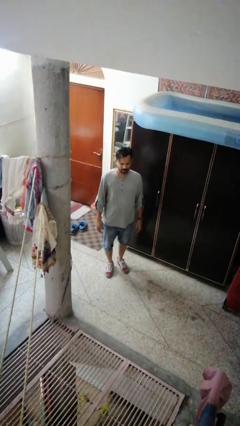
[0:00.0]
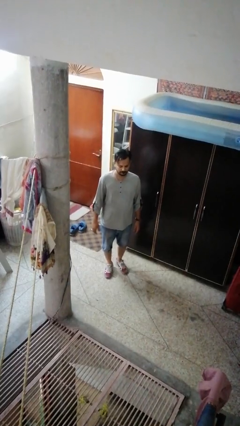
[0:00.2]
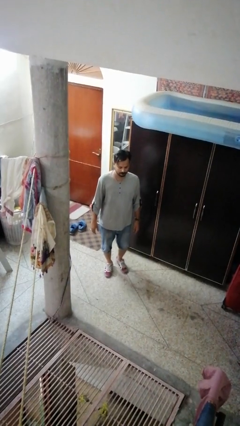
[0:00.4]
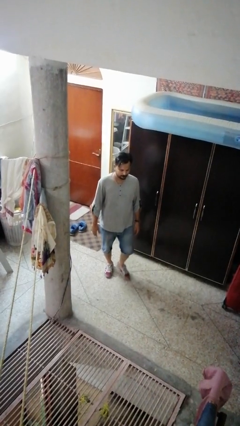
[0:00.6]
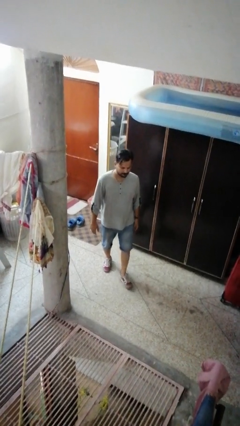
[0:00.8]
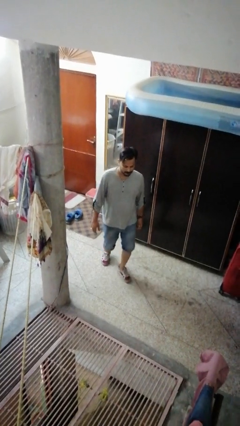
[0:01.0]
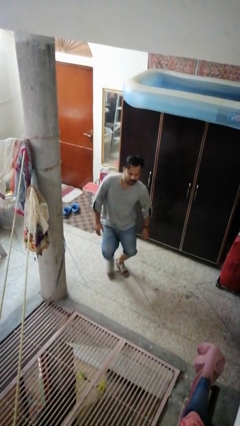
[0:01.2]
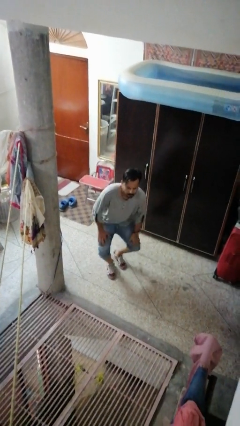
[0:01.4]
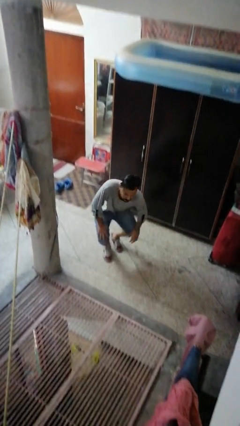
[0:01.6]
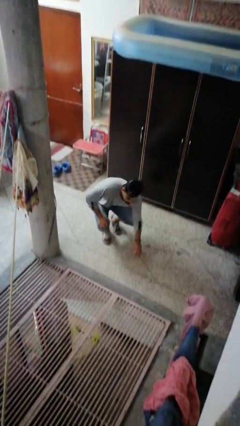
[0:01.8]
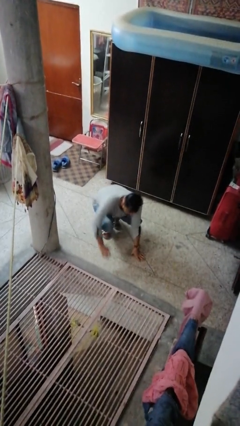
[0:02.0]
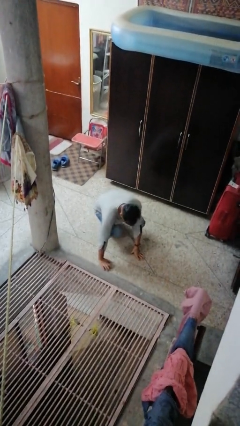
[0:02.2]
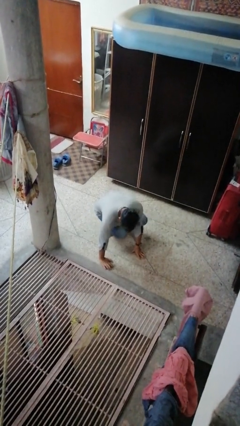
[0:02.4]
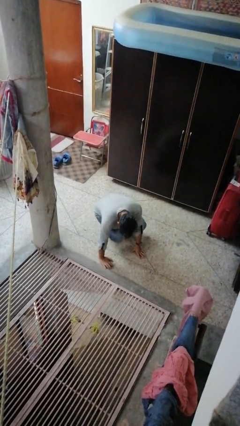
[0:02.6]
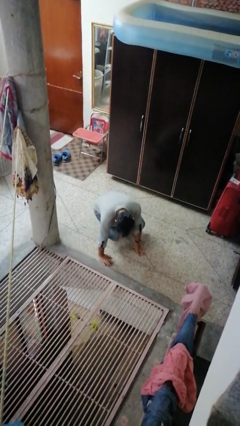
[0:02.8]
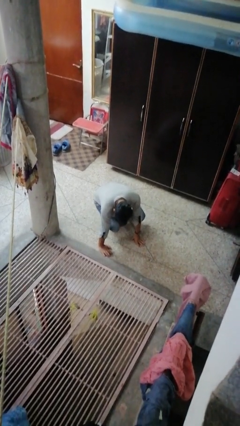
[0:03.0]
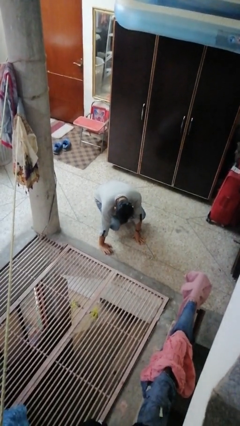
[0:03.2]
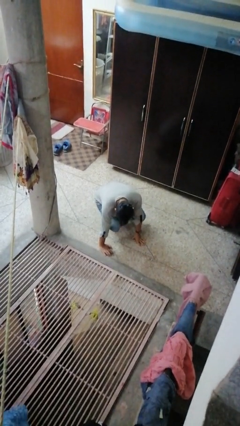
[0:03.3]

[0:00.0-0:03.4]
person falls while standing

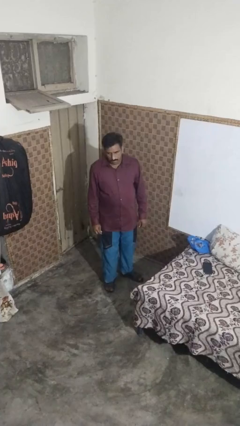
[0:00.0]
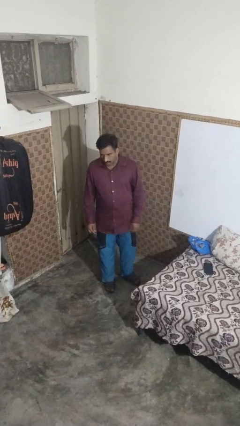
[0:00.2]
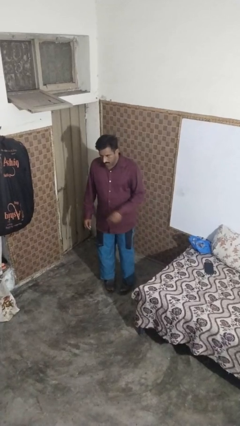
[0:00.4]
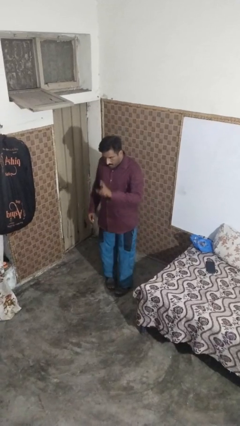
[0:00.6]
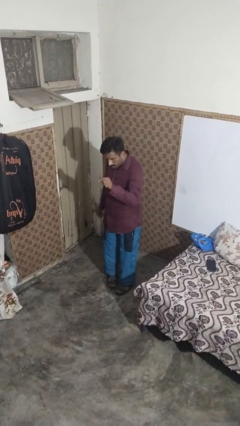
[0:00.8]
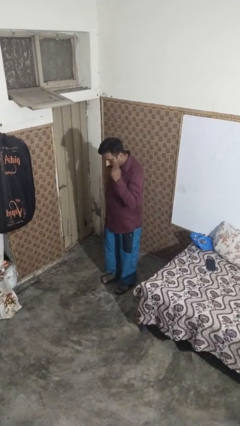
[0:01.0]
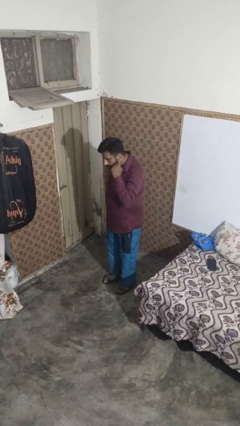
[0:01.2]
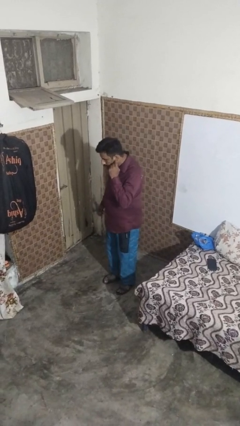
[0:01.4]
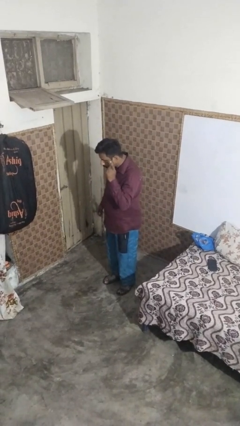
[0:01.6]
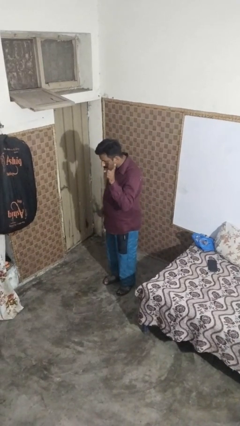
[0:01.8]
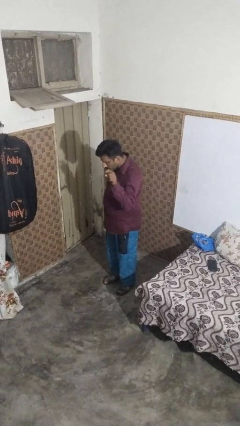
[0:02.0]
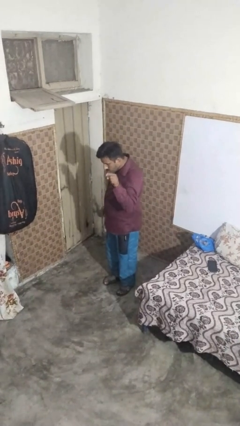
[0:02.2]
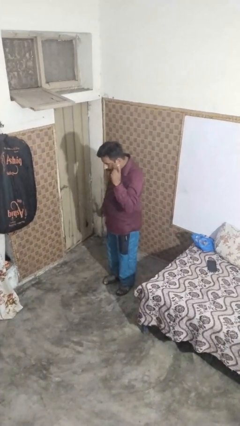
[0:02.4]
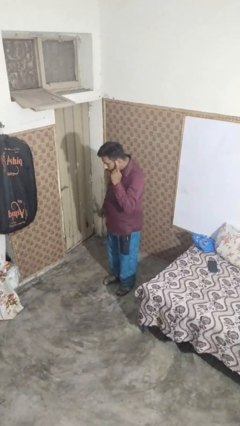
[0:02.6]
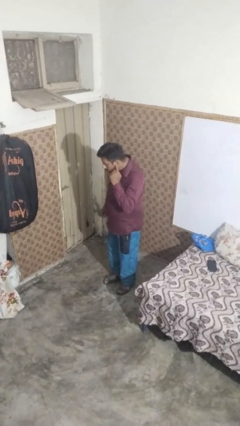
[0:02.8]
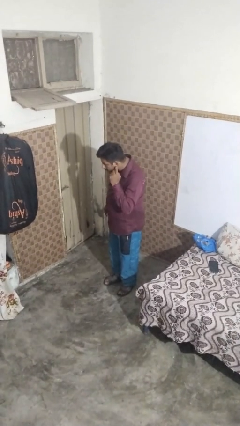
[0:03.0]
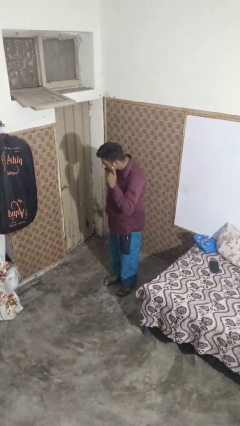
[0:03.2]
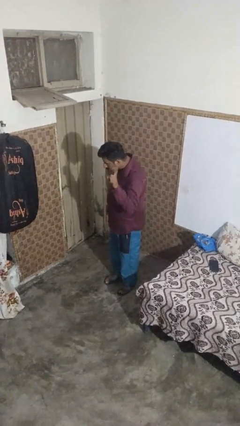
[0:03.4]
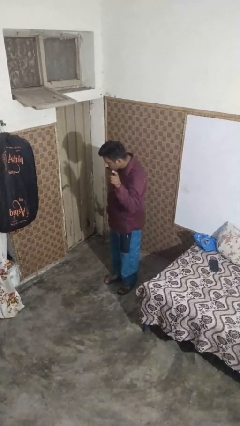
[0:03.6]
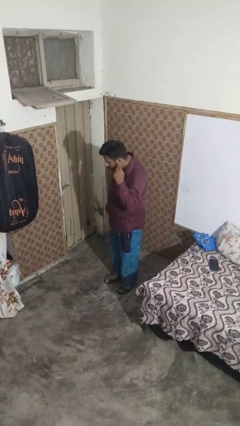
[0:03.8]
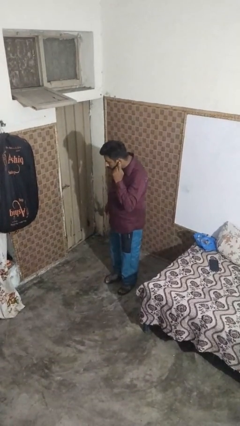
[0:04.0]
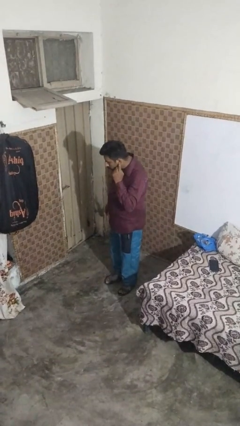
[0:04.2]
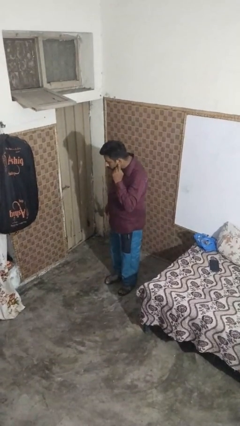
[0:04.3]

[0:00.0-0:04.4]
person gestures listen closely

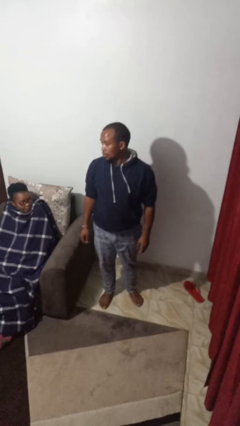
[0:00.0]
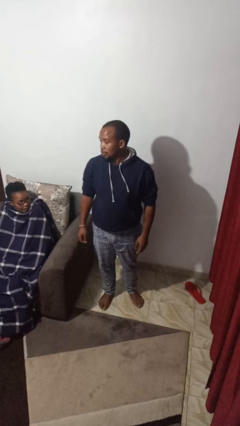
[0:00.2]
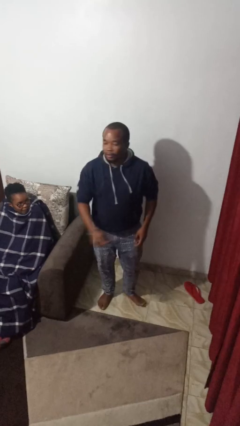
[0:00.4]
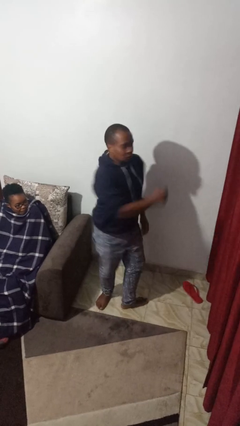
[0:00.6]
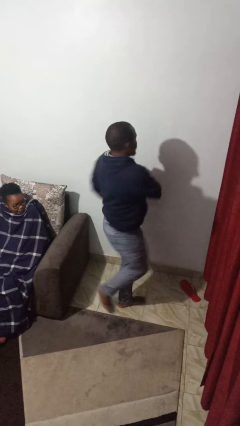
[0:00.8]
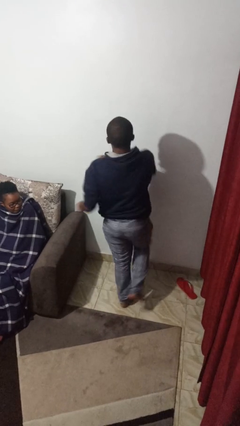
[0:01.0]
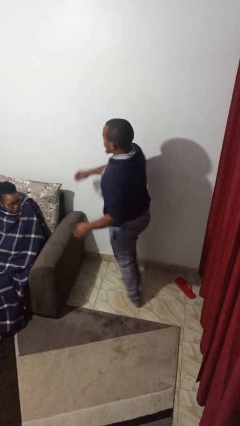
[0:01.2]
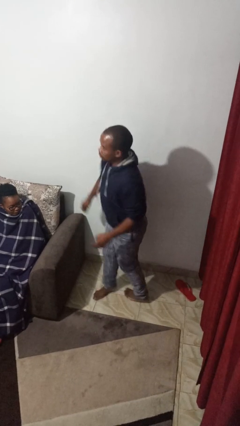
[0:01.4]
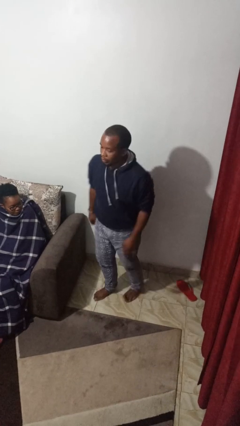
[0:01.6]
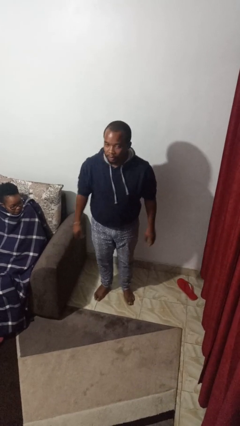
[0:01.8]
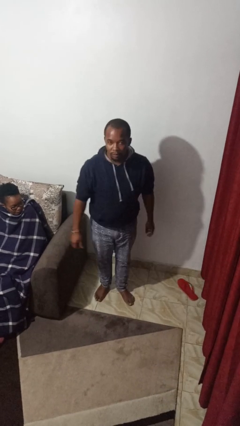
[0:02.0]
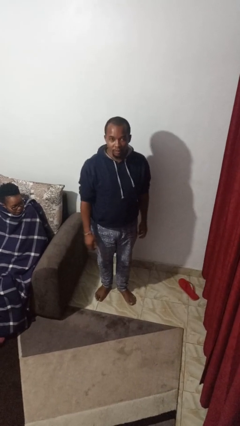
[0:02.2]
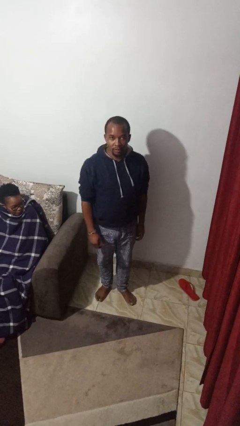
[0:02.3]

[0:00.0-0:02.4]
person twirls

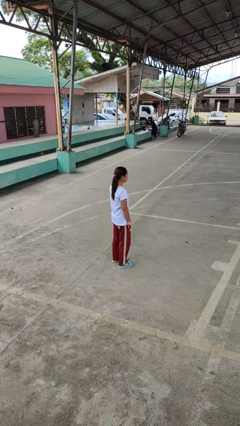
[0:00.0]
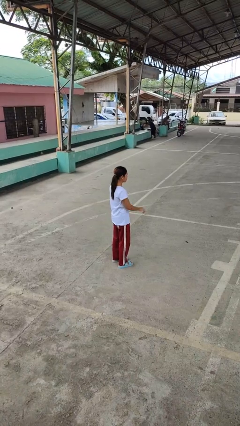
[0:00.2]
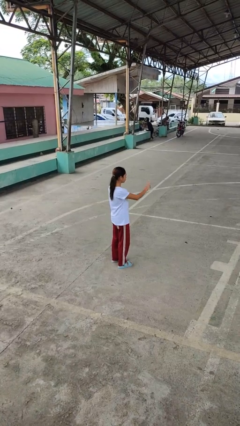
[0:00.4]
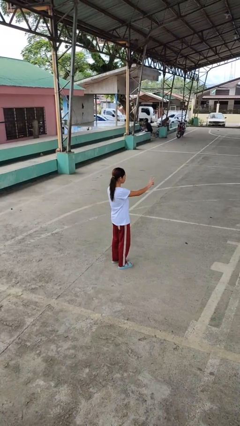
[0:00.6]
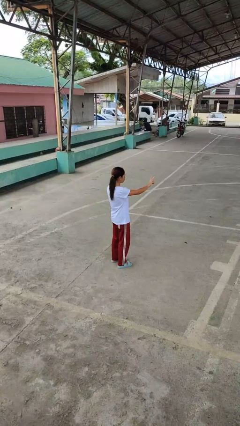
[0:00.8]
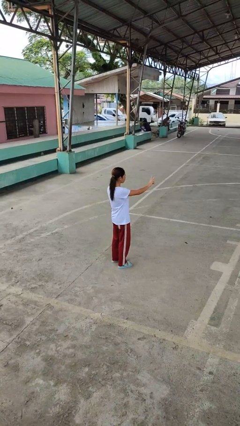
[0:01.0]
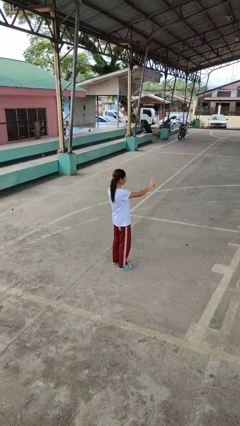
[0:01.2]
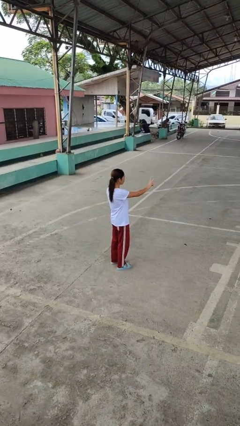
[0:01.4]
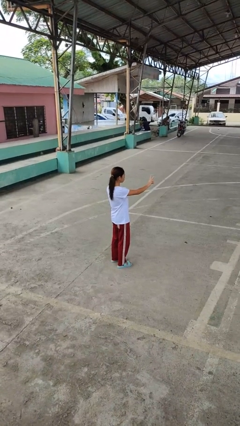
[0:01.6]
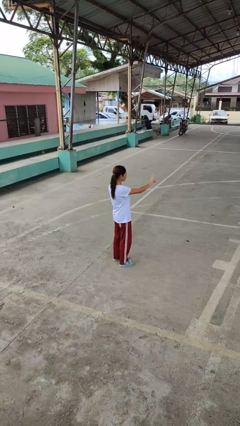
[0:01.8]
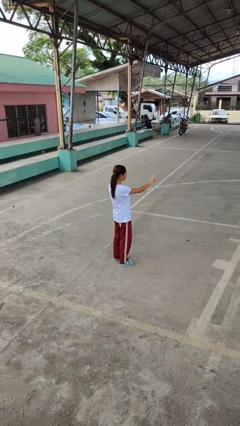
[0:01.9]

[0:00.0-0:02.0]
person gestures peace

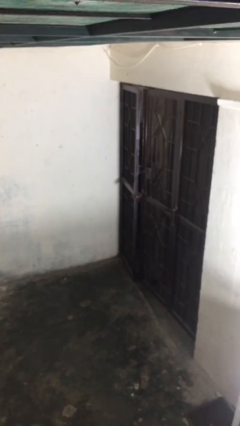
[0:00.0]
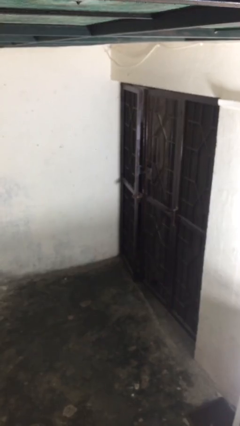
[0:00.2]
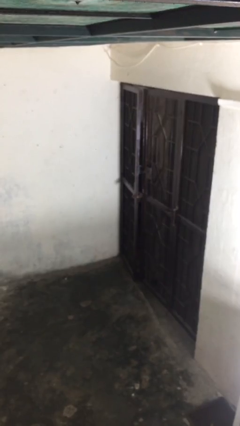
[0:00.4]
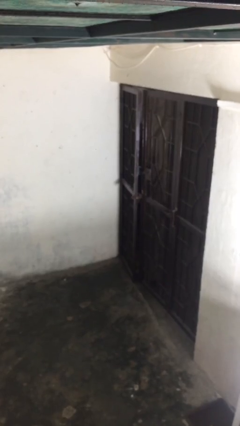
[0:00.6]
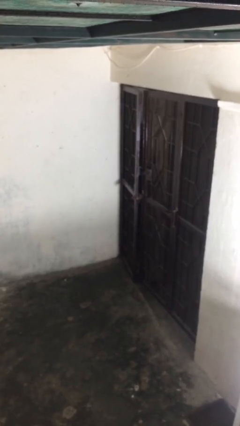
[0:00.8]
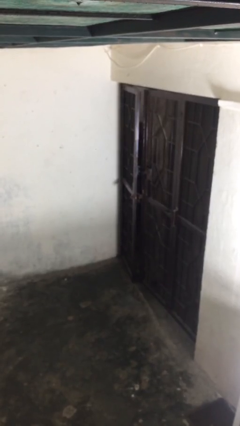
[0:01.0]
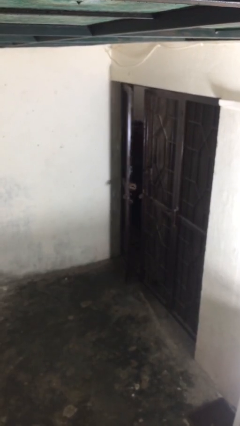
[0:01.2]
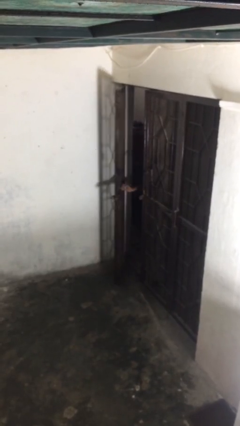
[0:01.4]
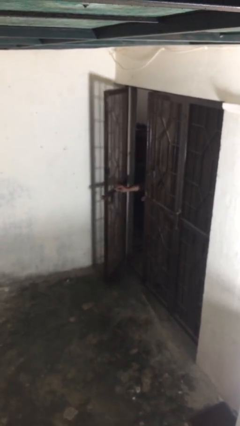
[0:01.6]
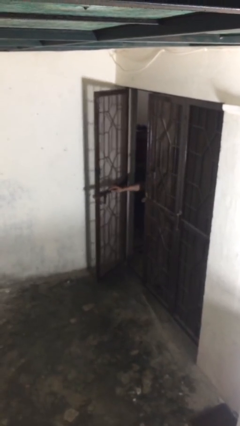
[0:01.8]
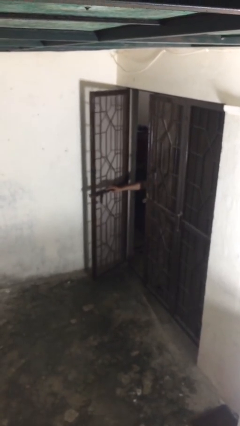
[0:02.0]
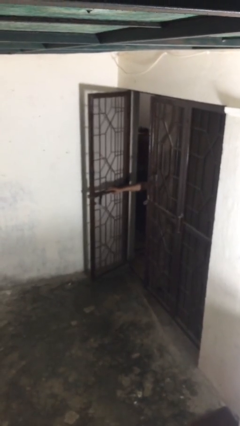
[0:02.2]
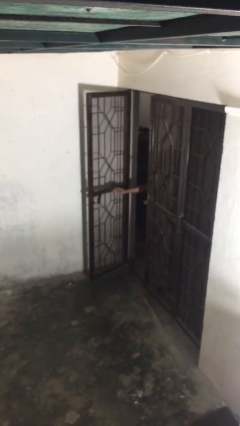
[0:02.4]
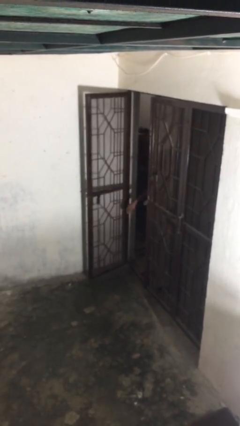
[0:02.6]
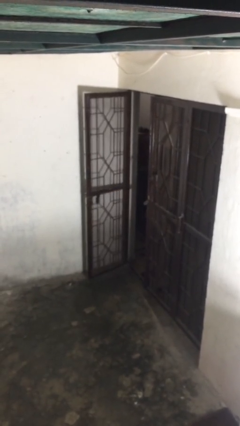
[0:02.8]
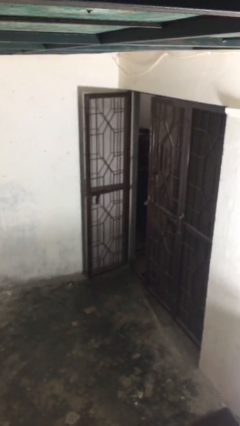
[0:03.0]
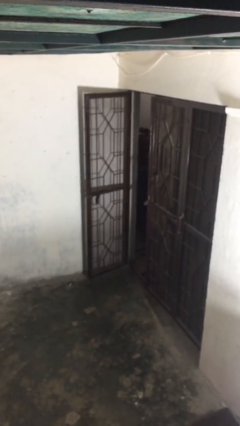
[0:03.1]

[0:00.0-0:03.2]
person opens facility door

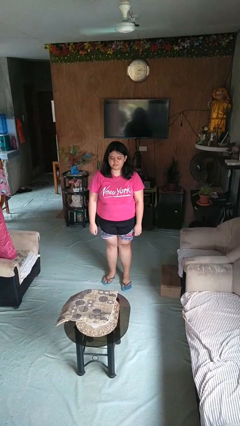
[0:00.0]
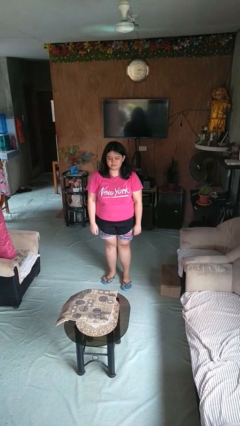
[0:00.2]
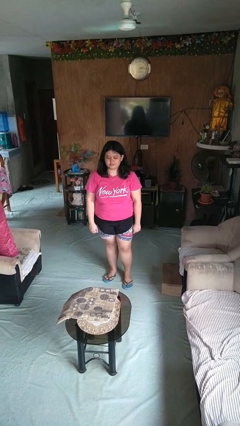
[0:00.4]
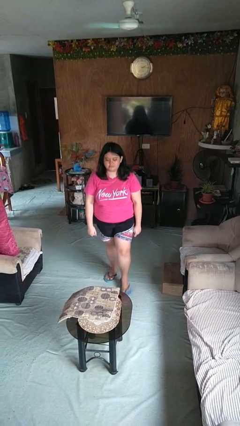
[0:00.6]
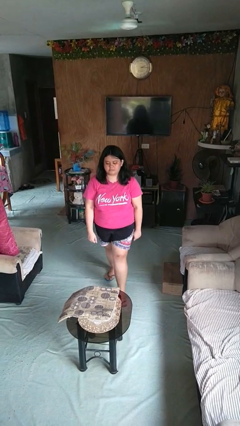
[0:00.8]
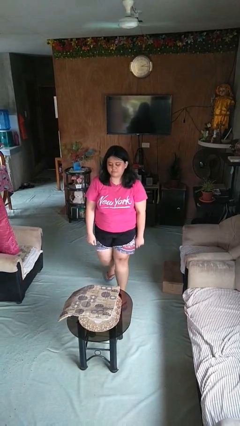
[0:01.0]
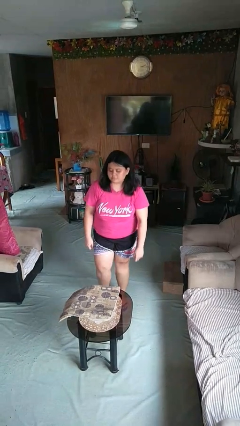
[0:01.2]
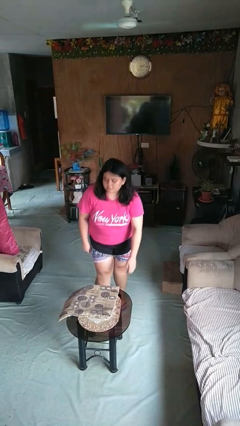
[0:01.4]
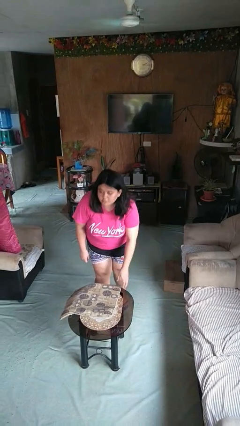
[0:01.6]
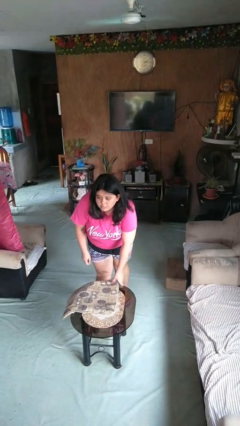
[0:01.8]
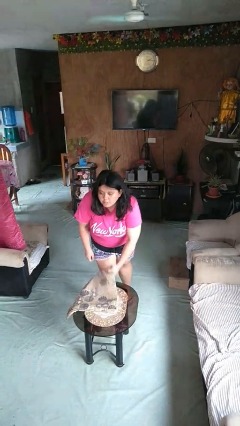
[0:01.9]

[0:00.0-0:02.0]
person picks up object from table
